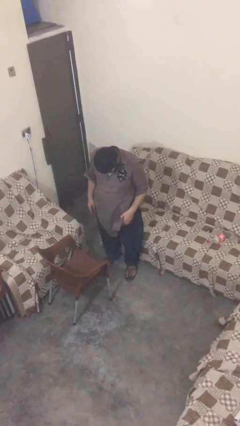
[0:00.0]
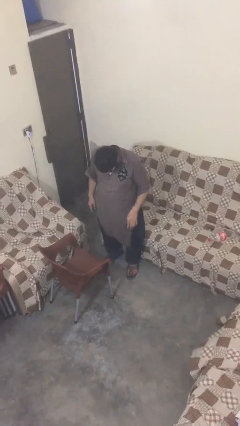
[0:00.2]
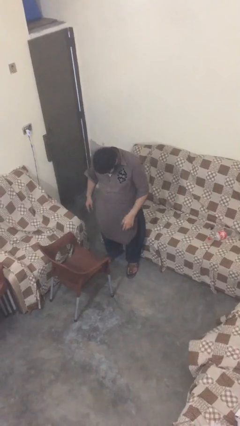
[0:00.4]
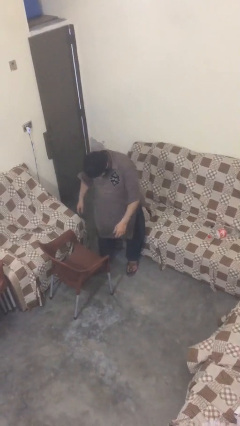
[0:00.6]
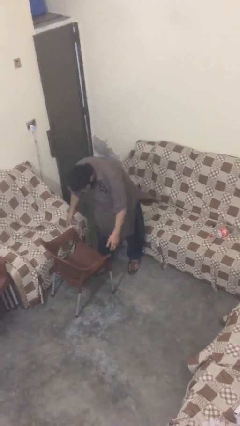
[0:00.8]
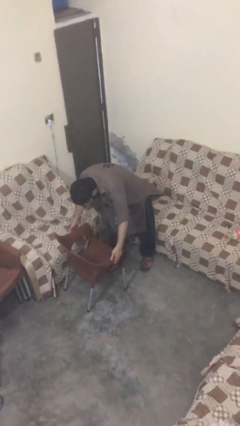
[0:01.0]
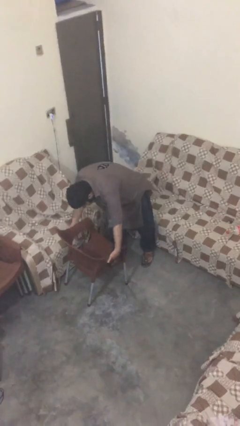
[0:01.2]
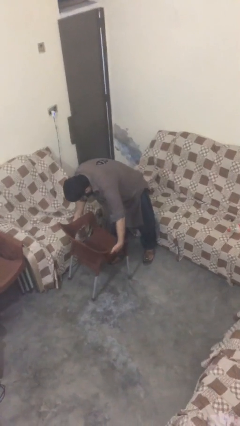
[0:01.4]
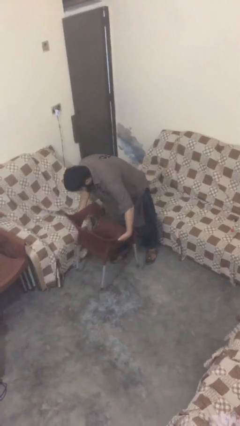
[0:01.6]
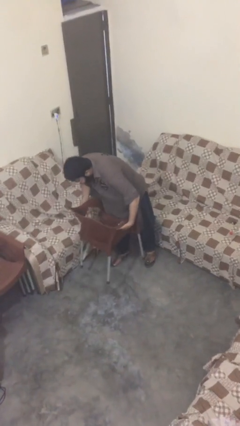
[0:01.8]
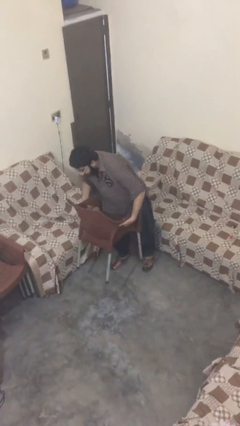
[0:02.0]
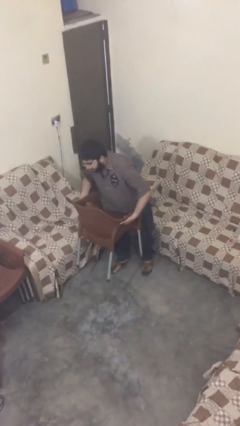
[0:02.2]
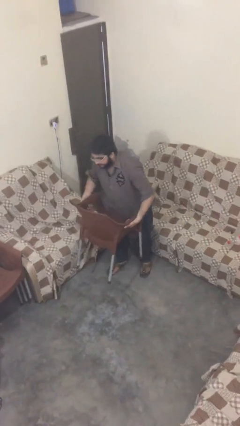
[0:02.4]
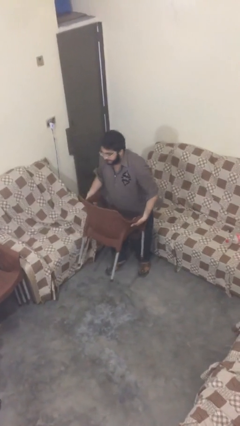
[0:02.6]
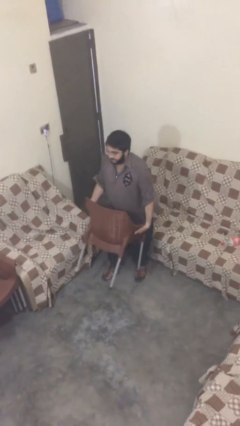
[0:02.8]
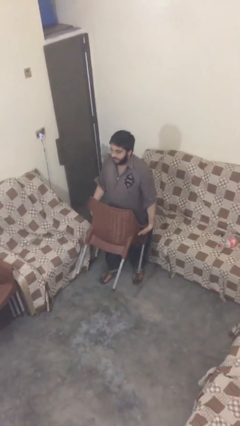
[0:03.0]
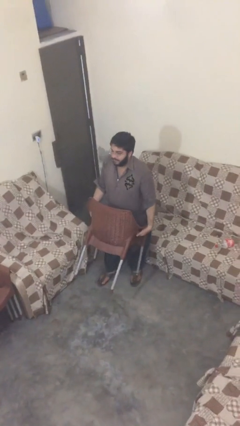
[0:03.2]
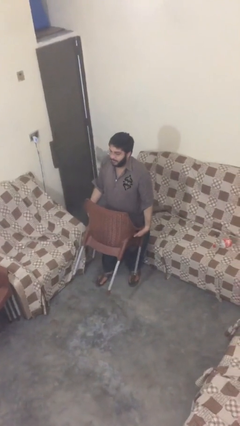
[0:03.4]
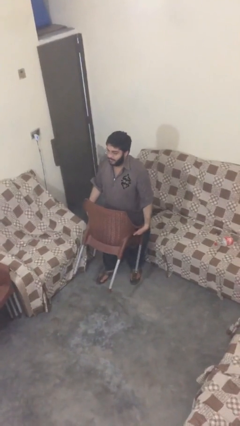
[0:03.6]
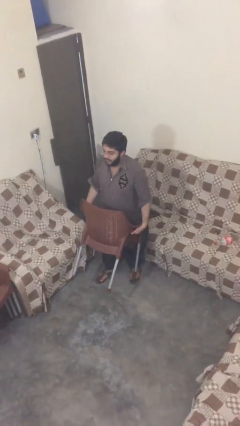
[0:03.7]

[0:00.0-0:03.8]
person picks up object from floor
